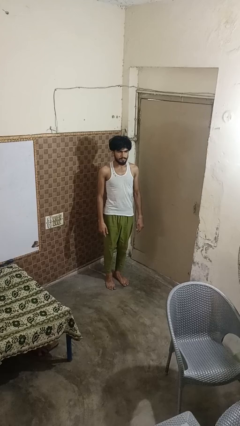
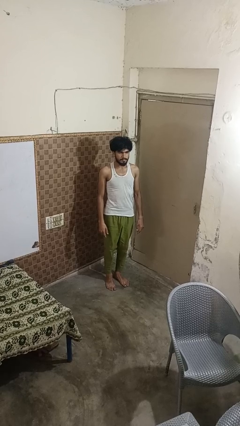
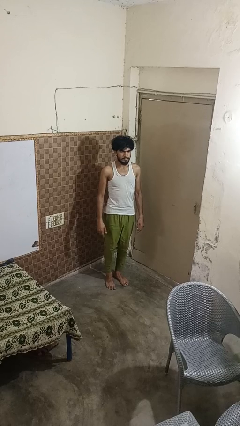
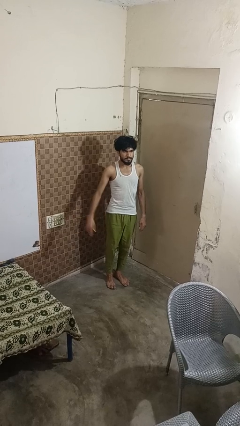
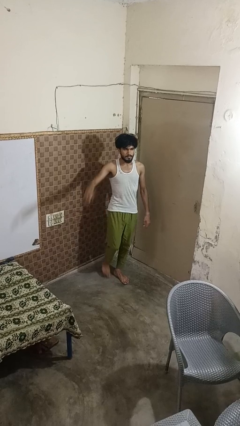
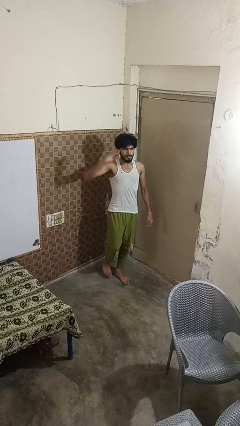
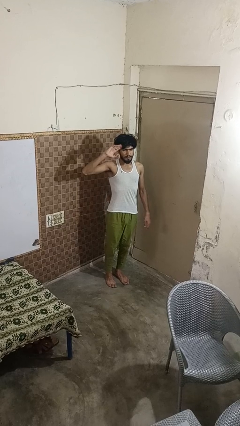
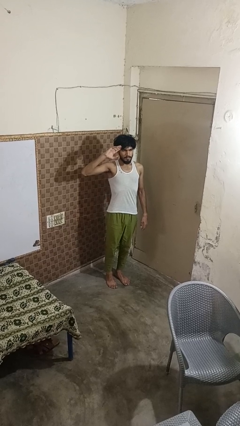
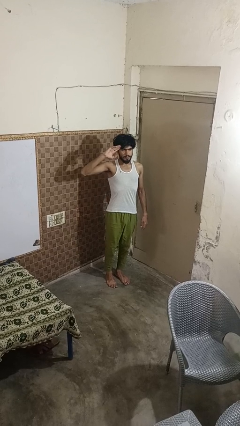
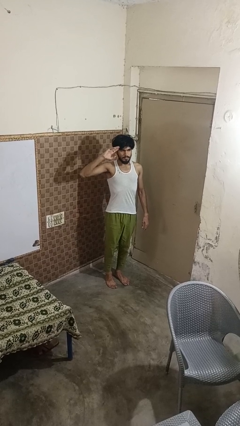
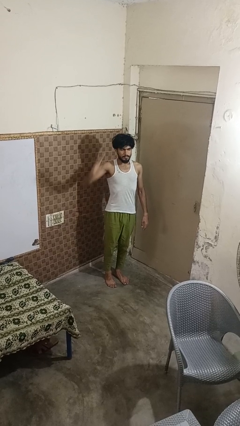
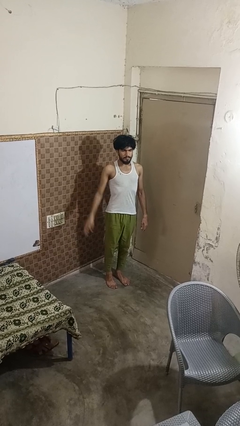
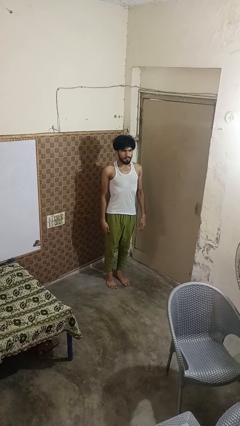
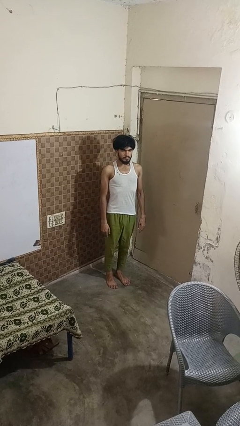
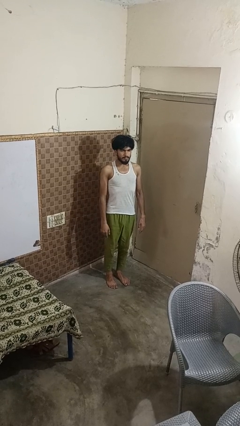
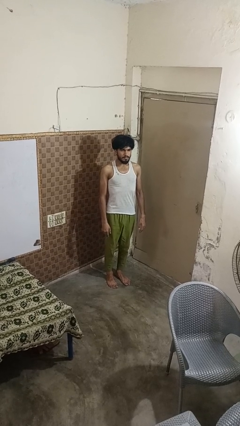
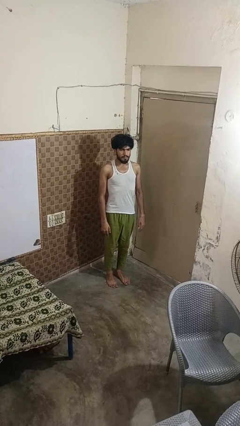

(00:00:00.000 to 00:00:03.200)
person salutes

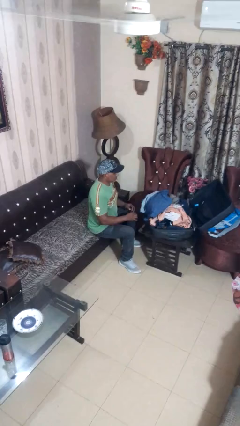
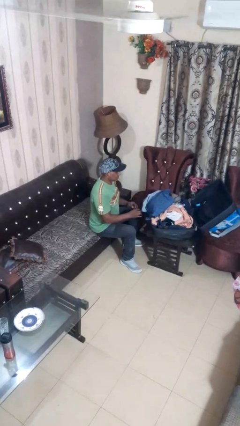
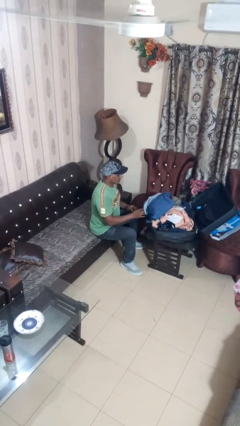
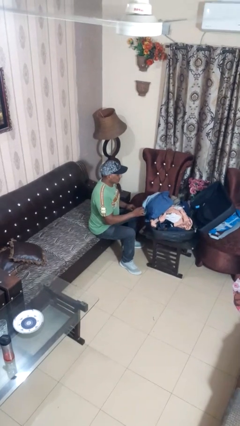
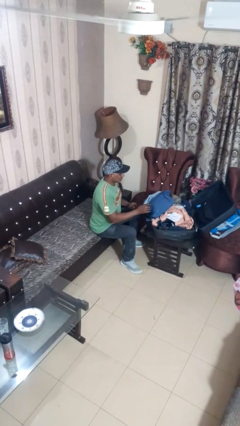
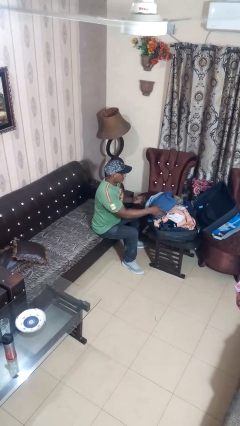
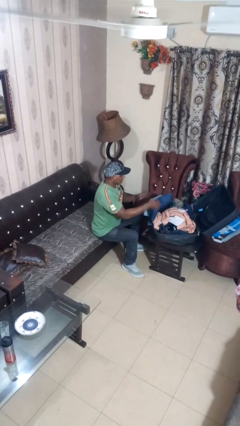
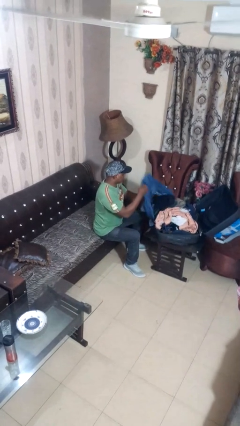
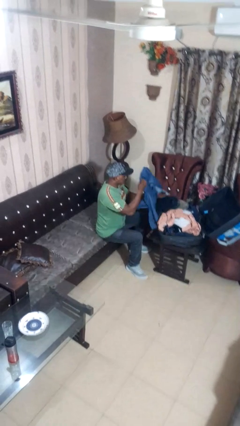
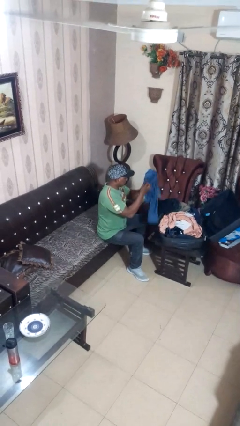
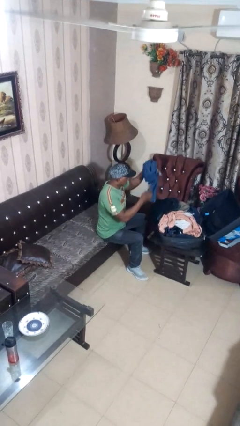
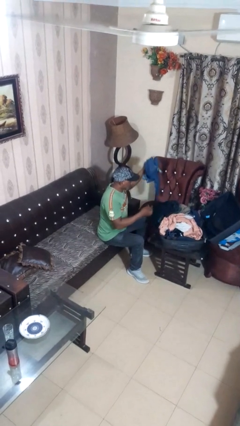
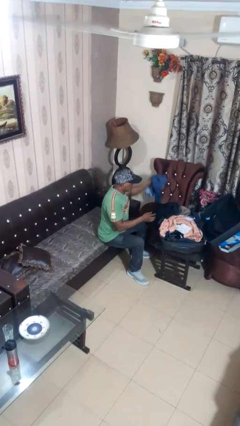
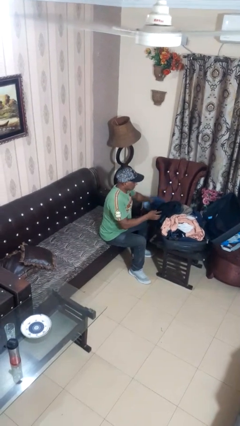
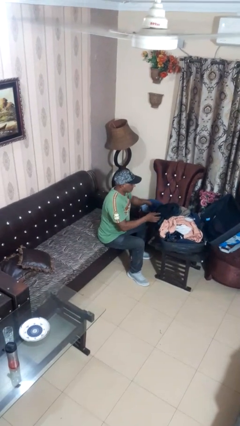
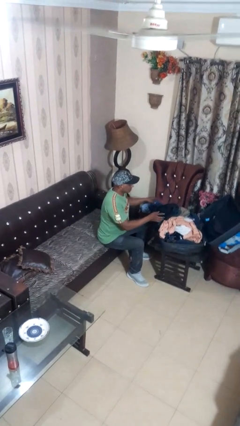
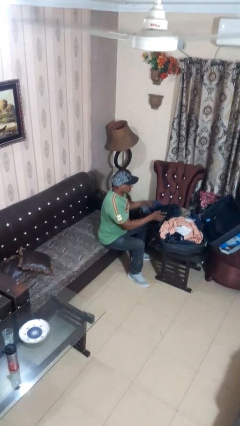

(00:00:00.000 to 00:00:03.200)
person unloads clothes from suitcase

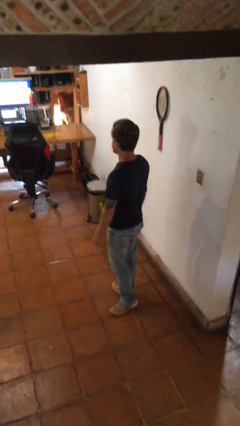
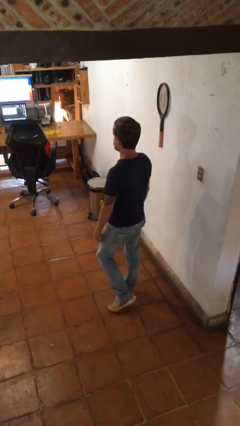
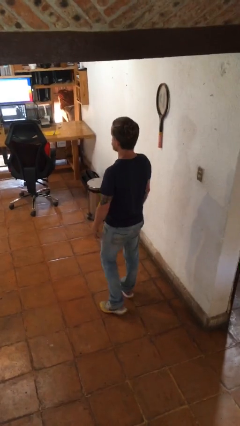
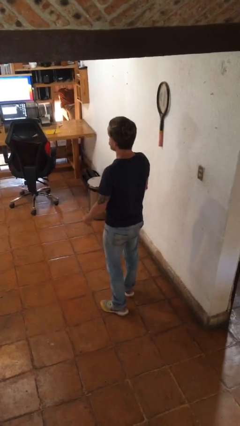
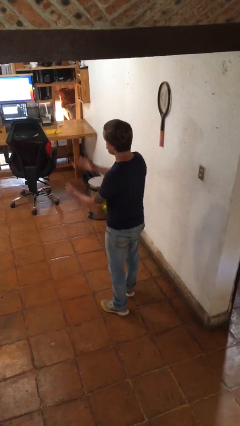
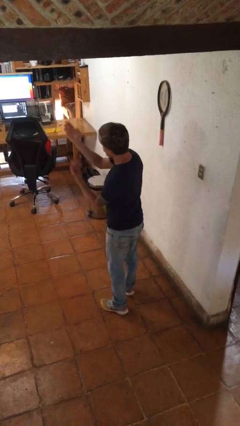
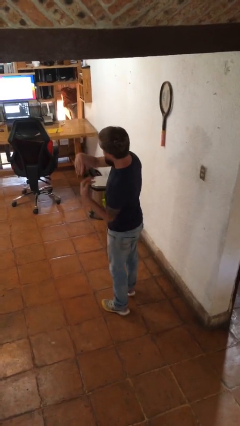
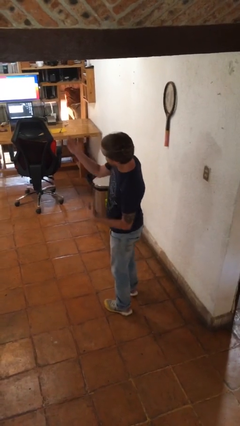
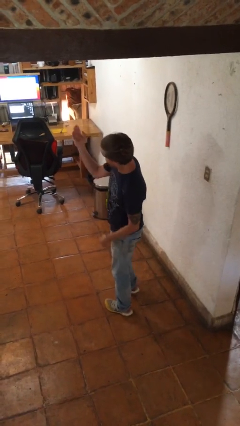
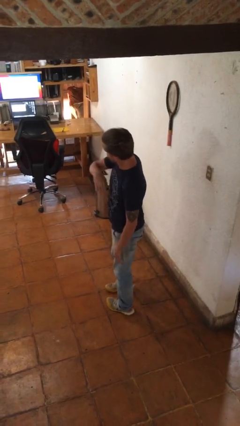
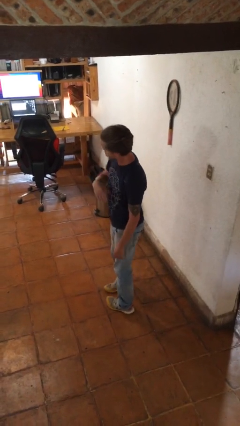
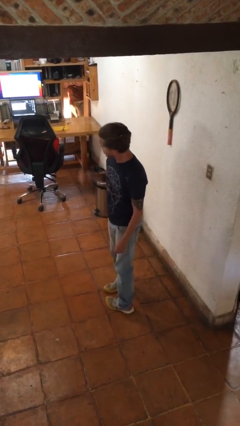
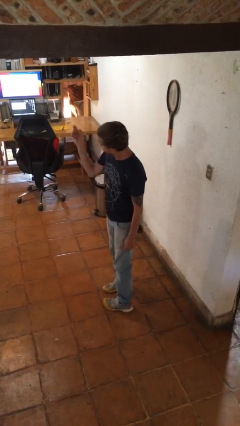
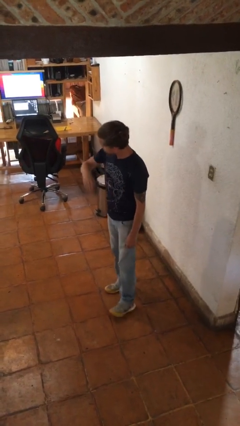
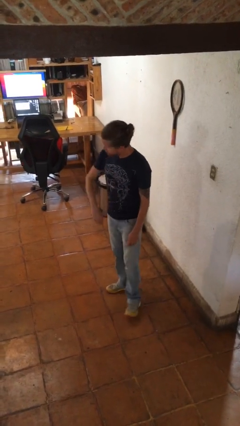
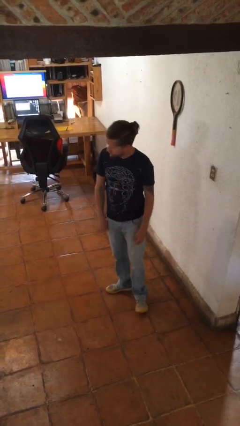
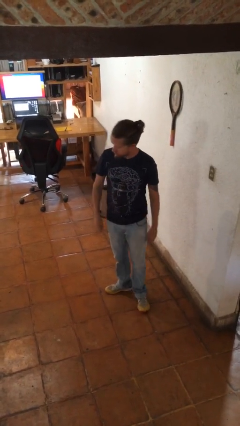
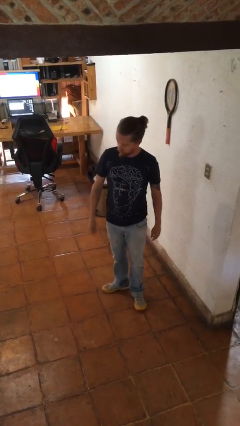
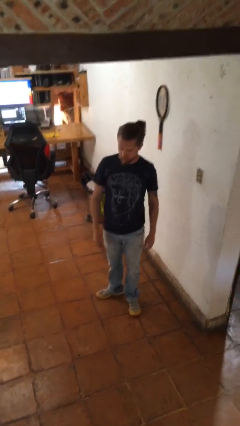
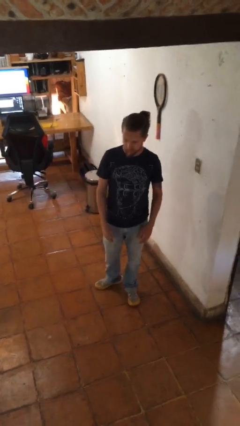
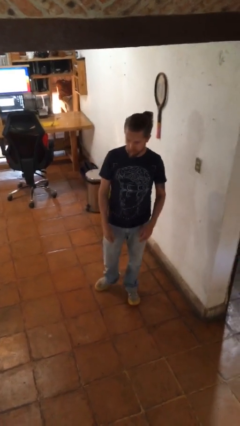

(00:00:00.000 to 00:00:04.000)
person gestures come here

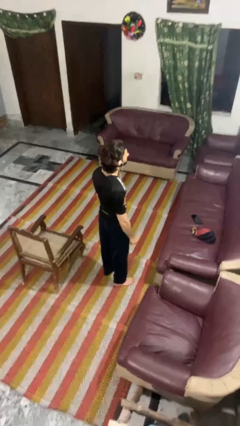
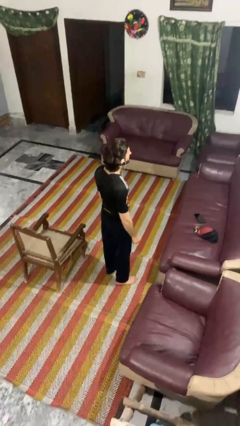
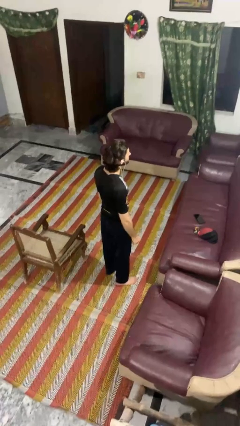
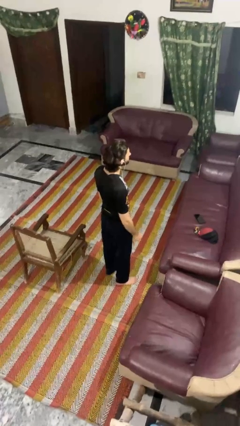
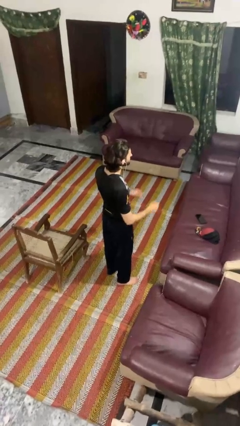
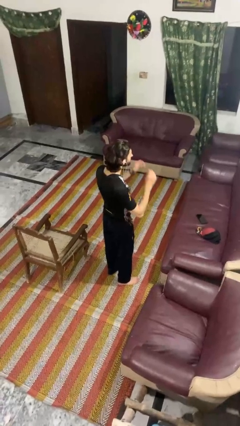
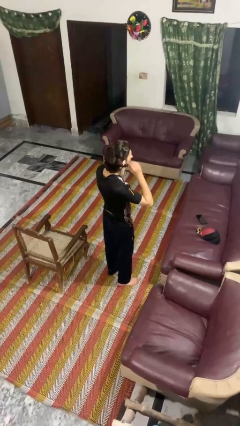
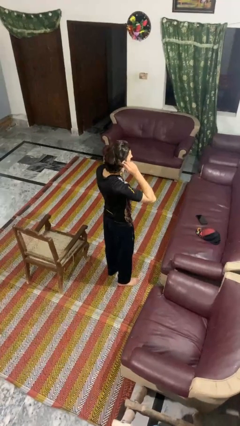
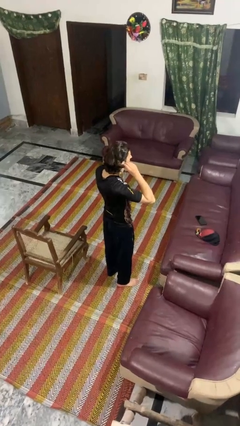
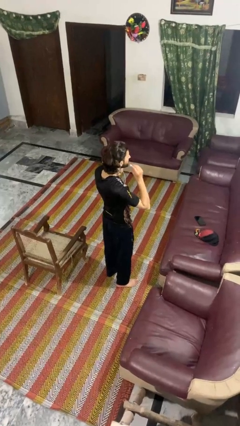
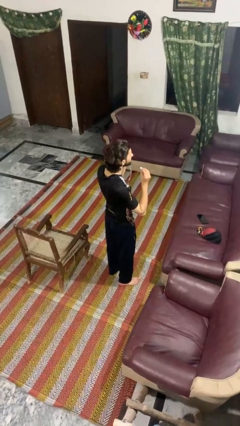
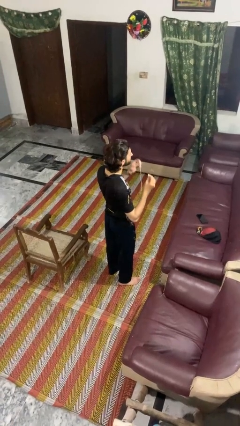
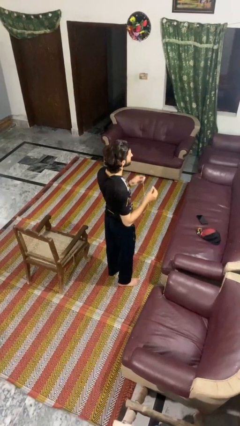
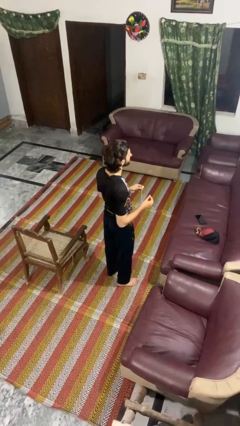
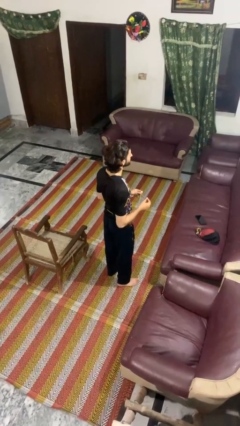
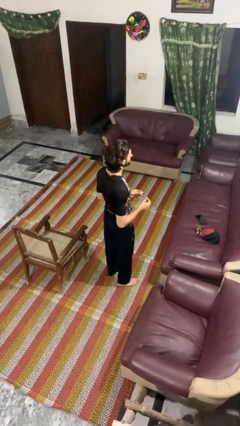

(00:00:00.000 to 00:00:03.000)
person takes off headphones

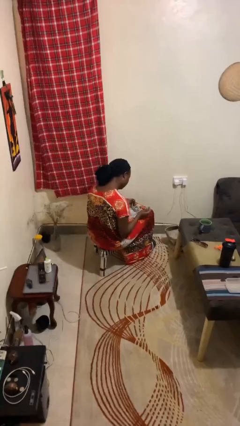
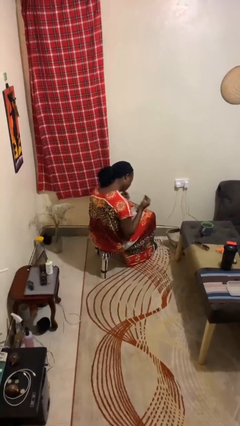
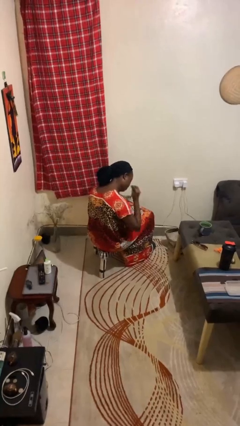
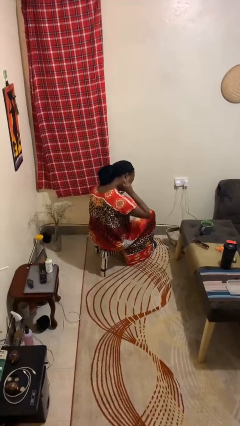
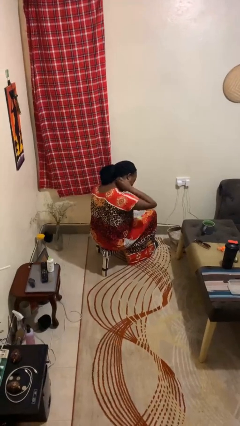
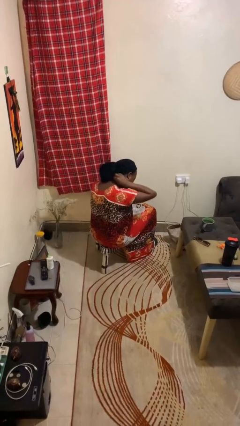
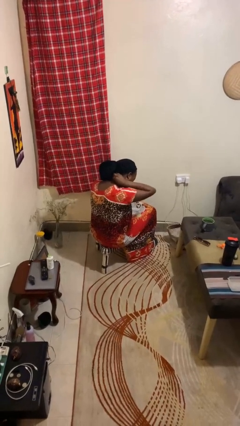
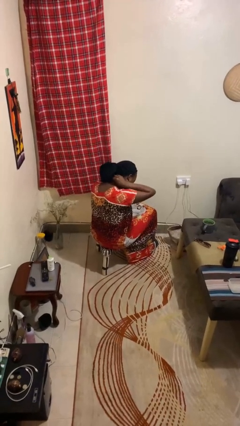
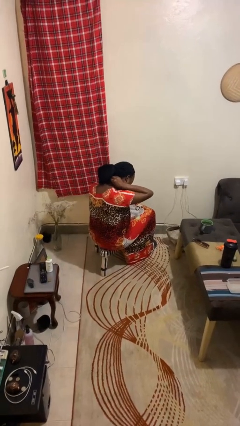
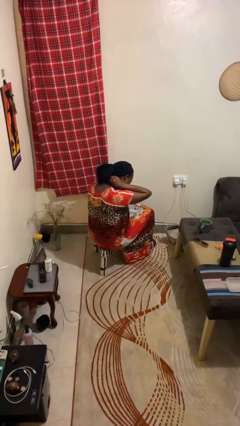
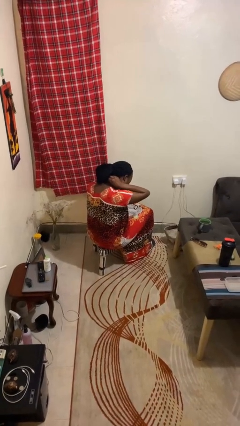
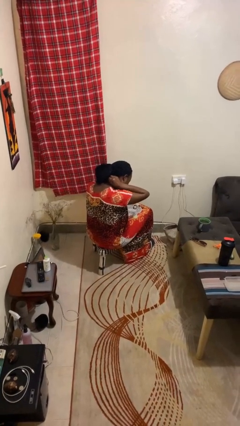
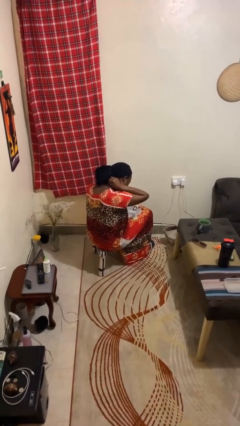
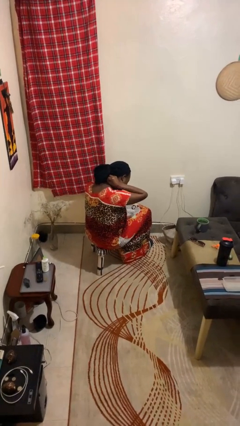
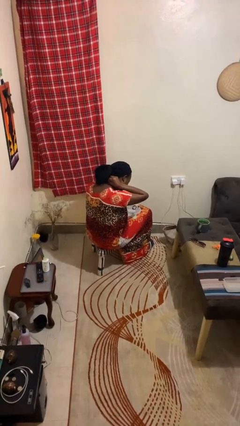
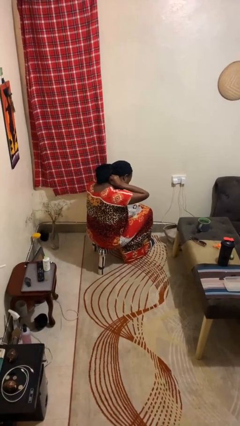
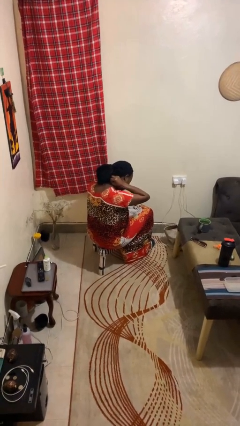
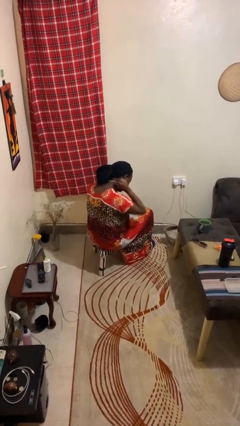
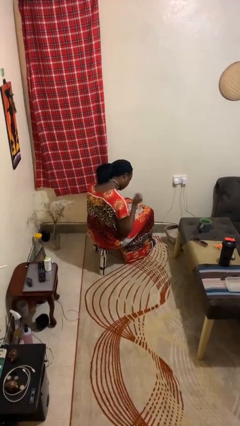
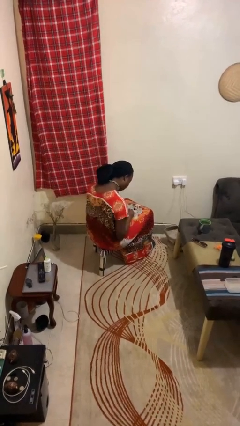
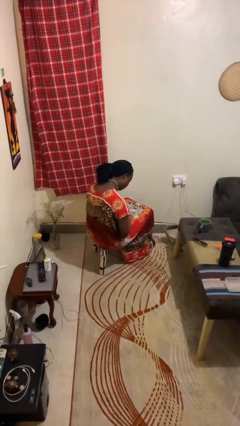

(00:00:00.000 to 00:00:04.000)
person puts on necklace
